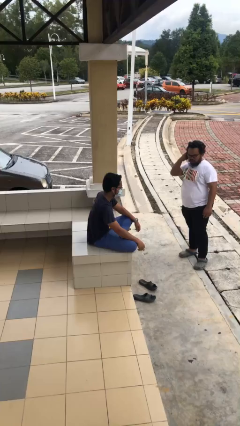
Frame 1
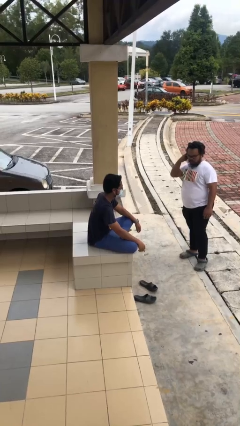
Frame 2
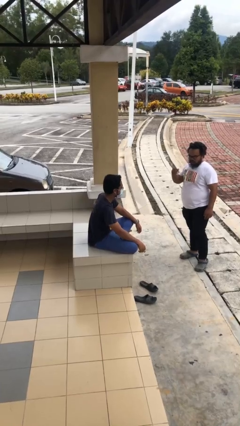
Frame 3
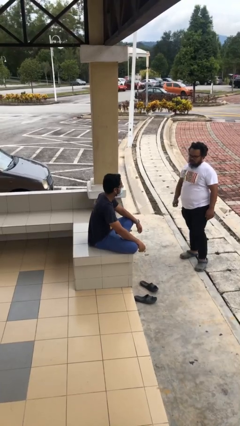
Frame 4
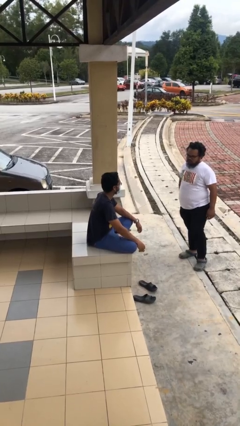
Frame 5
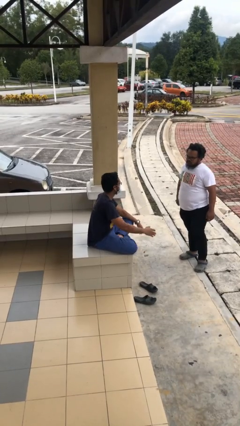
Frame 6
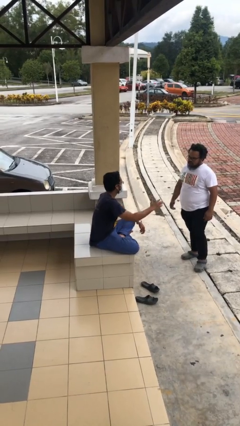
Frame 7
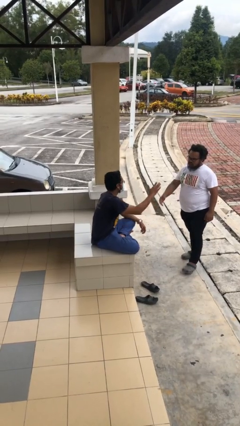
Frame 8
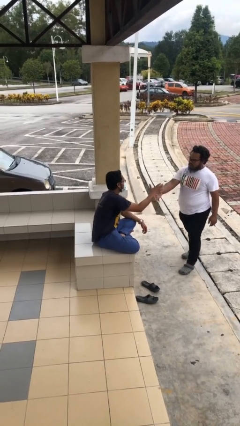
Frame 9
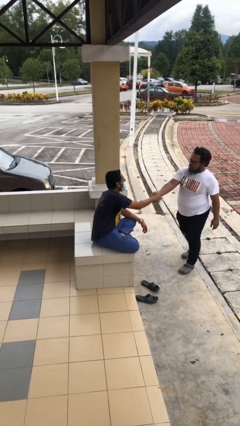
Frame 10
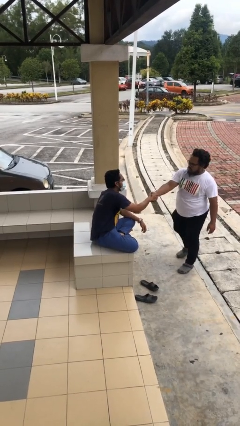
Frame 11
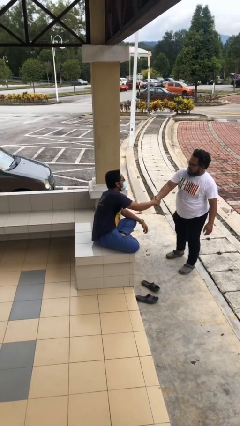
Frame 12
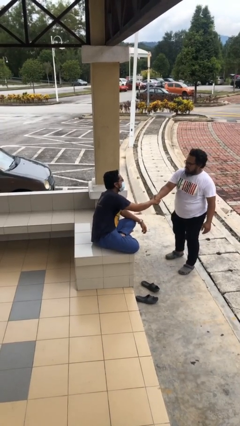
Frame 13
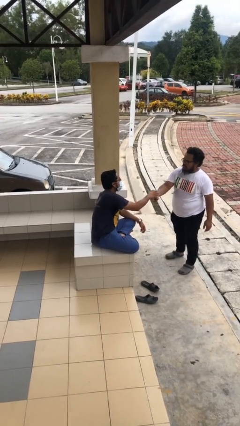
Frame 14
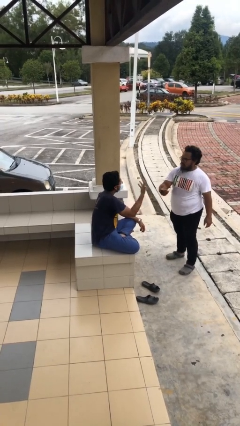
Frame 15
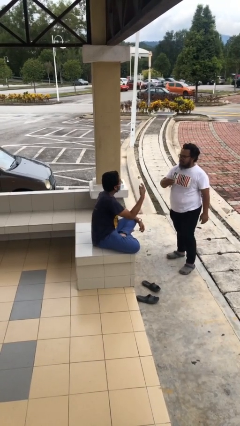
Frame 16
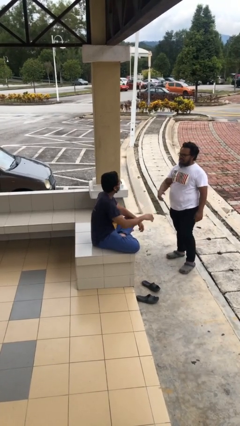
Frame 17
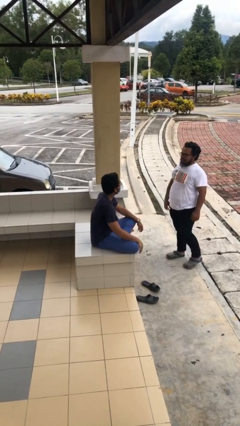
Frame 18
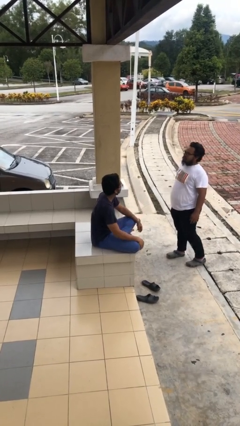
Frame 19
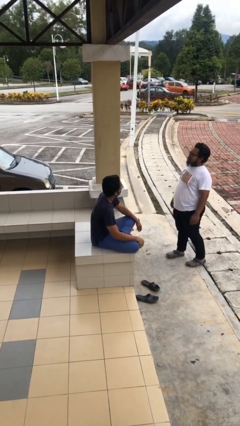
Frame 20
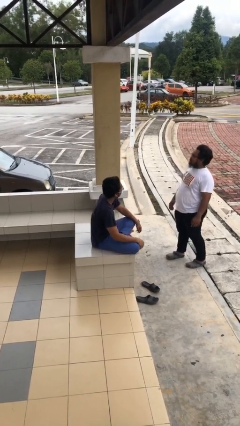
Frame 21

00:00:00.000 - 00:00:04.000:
person shakes hand

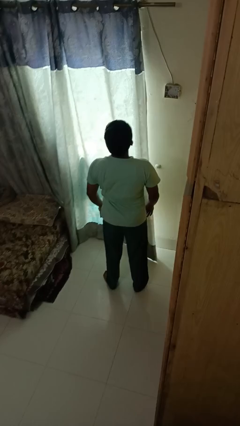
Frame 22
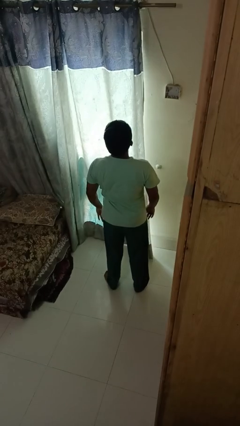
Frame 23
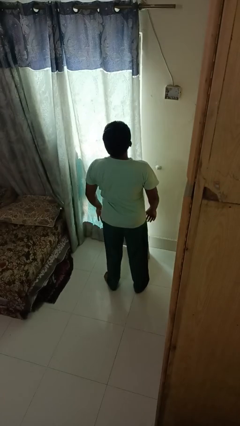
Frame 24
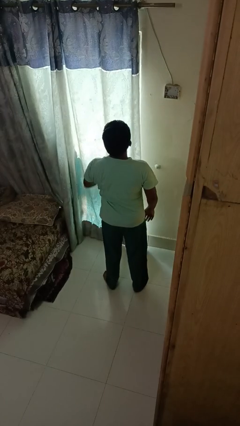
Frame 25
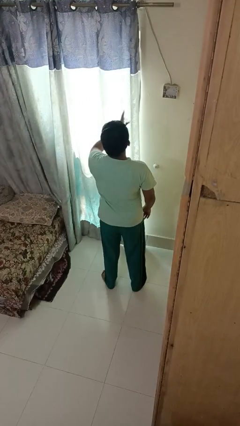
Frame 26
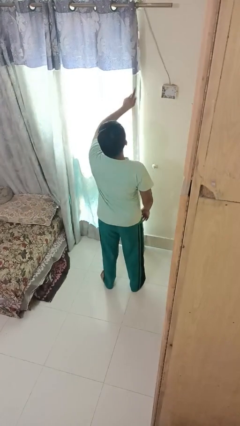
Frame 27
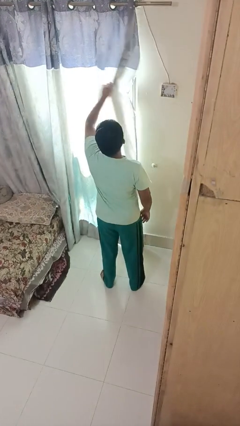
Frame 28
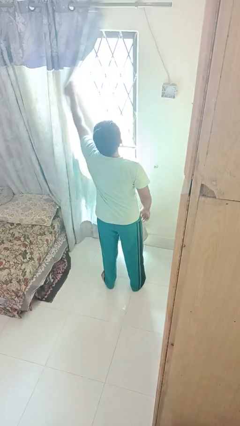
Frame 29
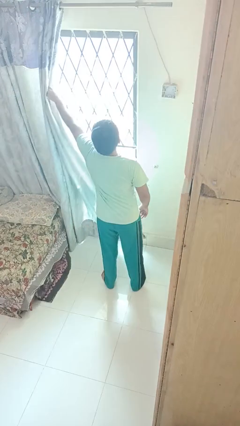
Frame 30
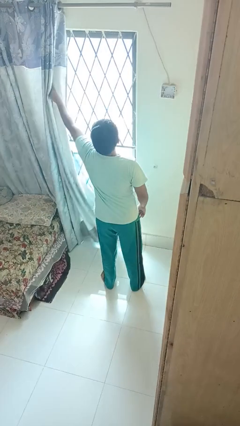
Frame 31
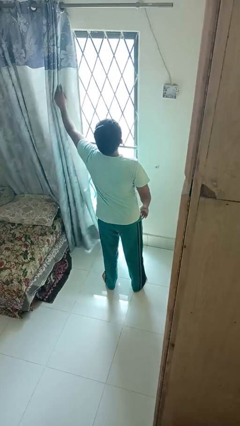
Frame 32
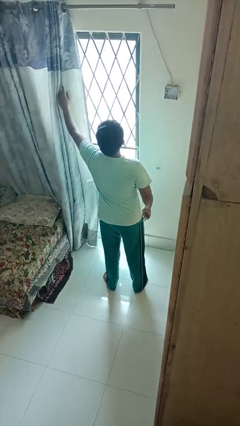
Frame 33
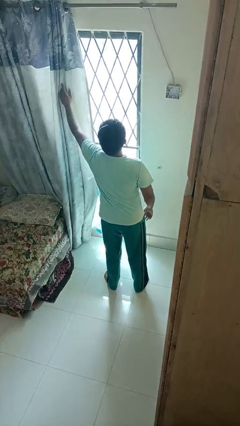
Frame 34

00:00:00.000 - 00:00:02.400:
person opens curtains

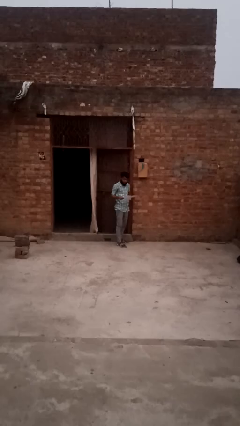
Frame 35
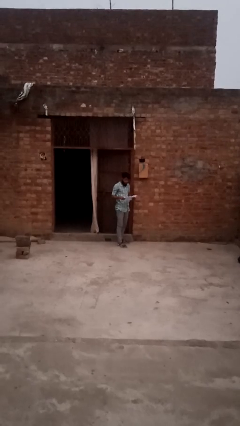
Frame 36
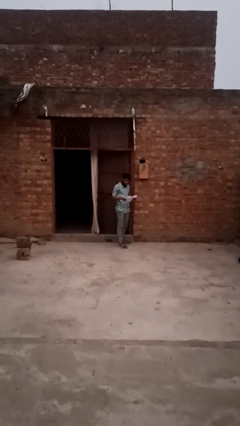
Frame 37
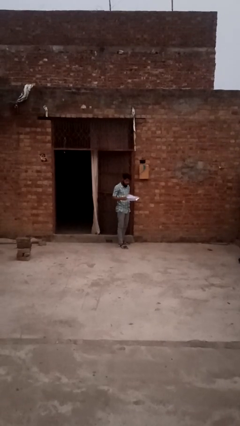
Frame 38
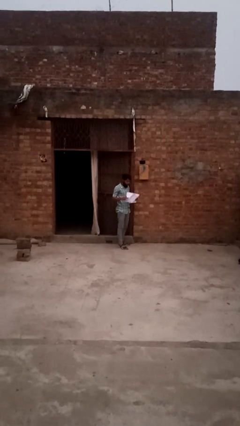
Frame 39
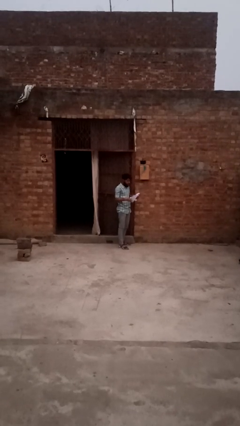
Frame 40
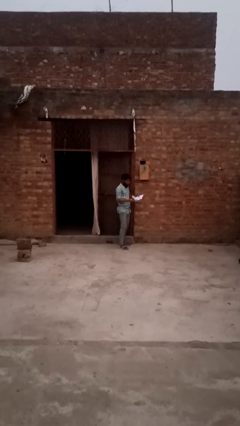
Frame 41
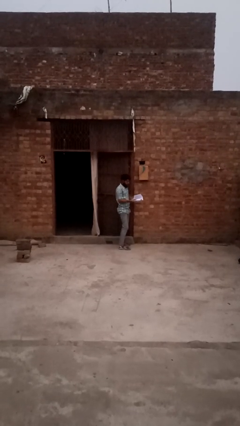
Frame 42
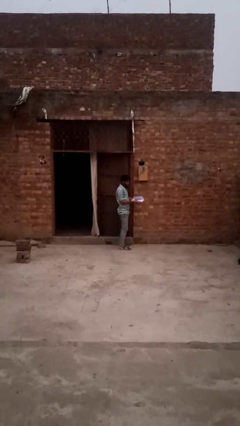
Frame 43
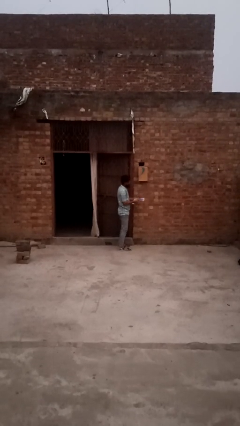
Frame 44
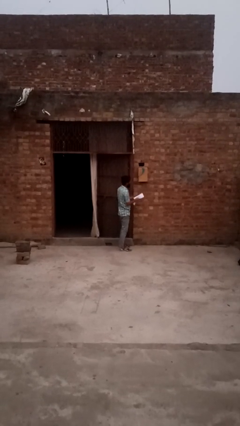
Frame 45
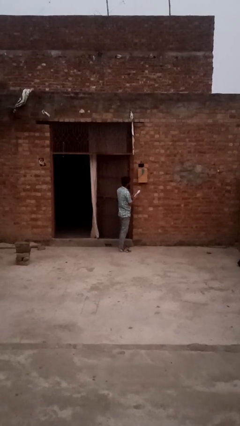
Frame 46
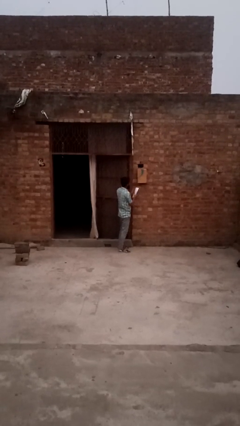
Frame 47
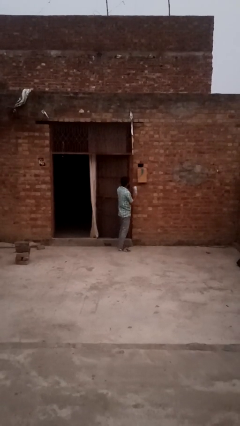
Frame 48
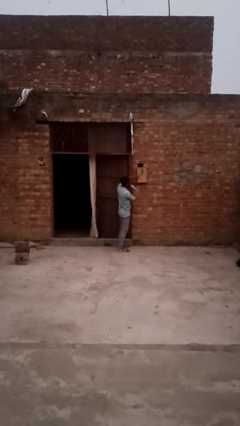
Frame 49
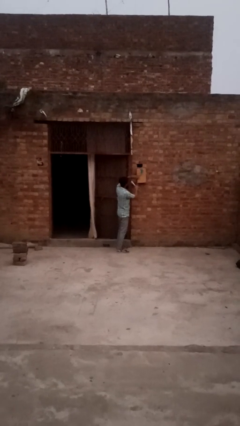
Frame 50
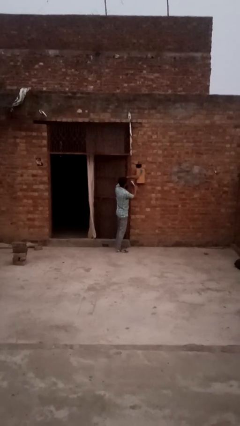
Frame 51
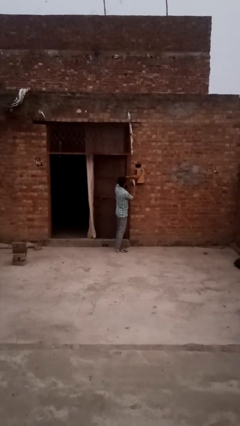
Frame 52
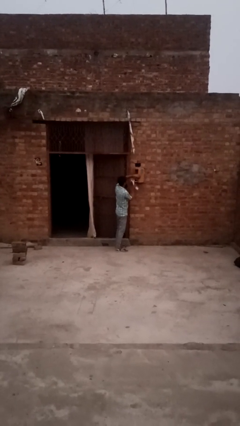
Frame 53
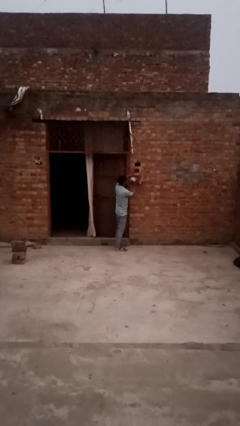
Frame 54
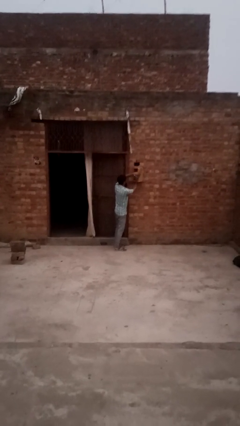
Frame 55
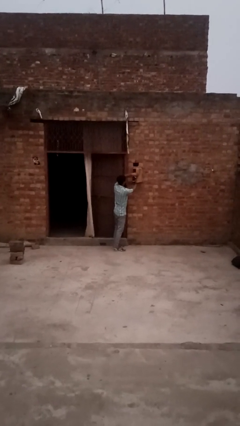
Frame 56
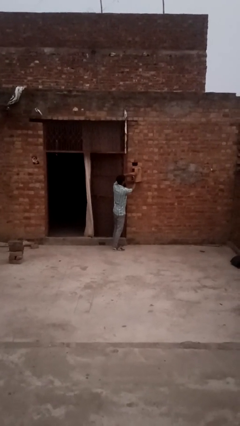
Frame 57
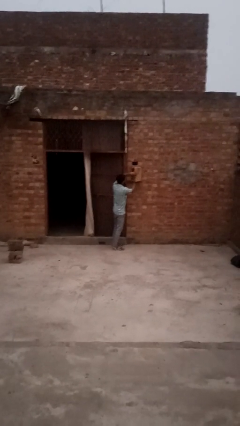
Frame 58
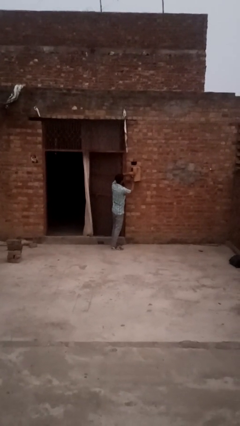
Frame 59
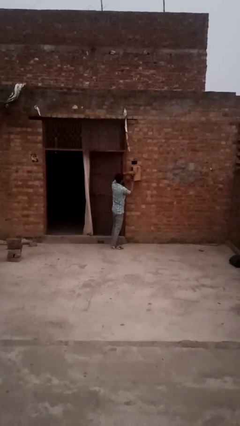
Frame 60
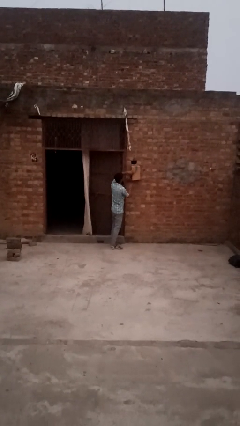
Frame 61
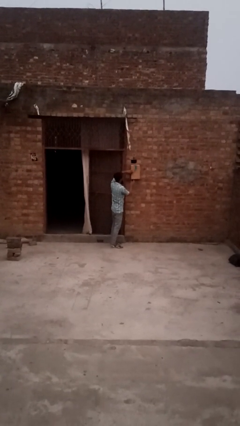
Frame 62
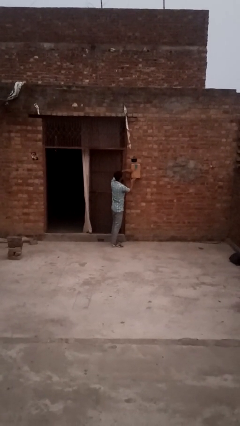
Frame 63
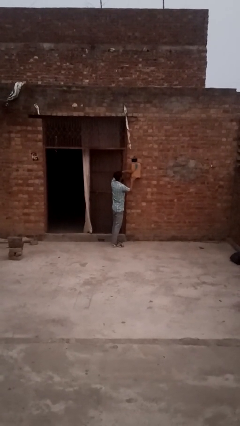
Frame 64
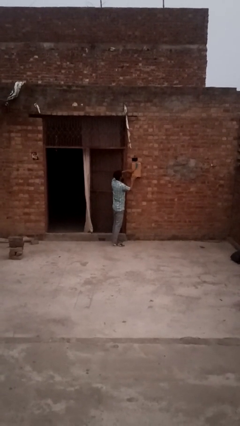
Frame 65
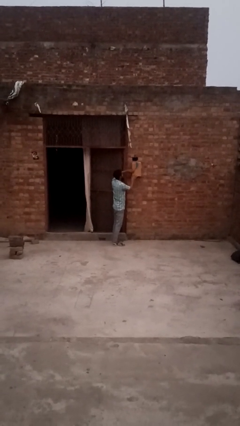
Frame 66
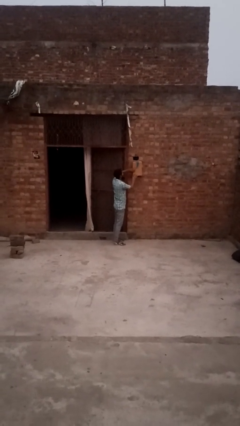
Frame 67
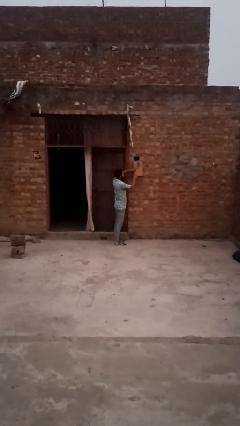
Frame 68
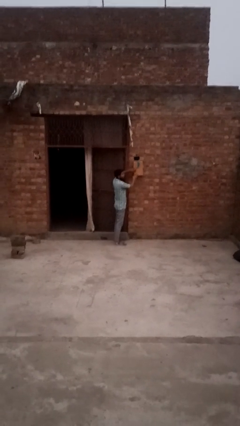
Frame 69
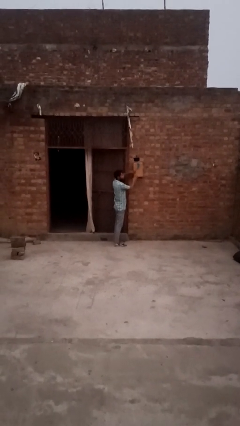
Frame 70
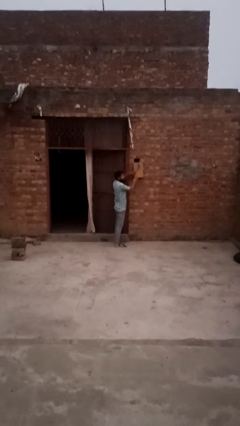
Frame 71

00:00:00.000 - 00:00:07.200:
person takes letters from mailbox

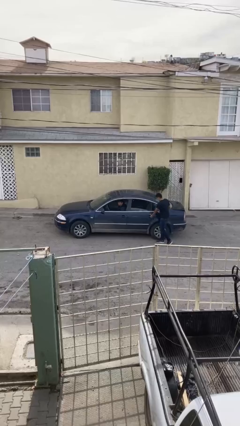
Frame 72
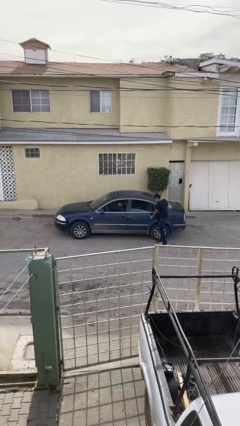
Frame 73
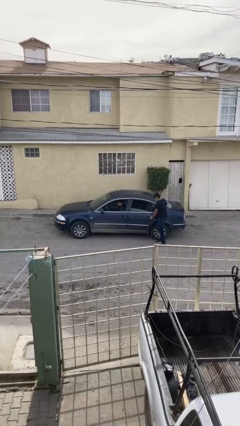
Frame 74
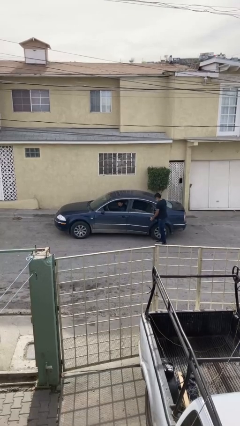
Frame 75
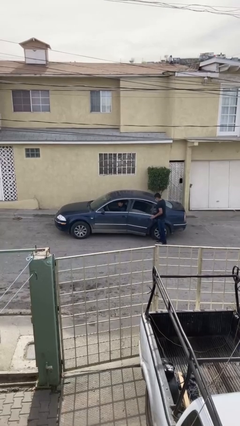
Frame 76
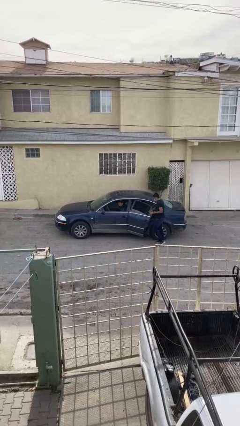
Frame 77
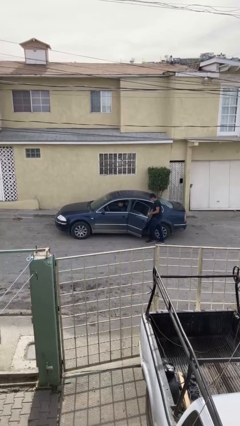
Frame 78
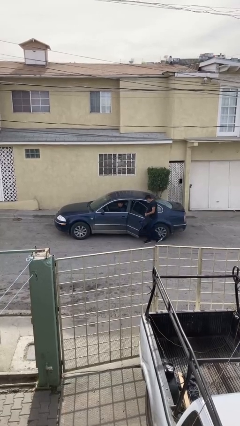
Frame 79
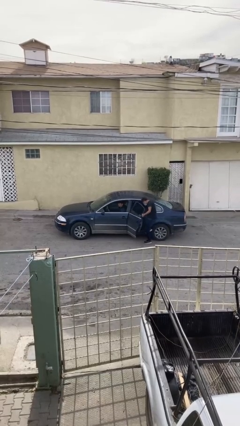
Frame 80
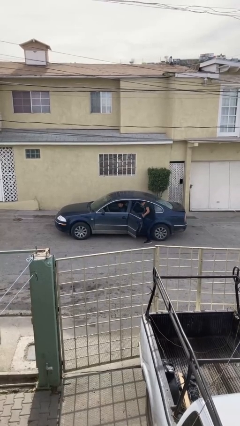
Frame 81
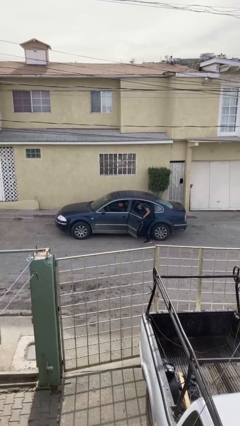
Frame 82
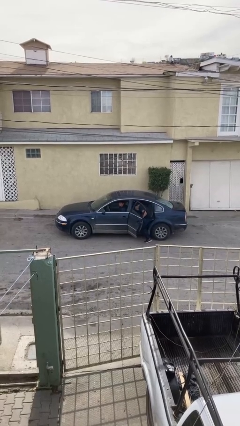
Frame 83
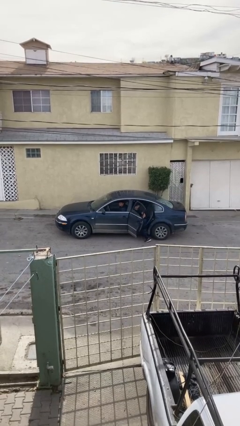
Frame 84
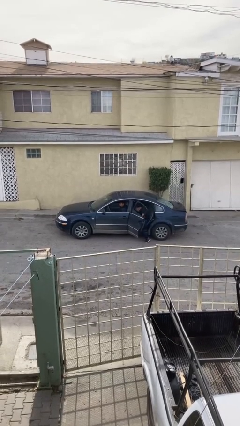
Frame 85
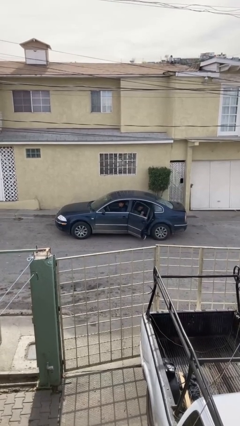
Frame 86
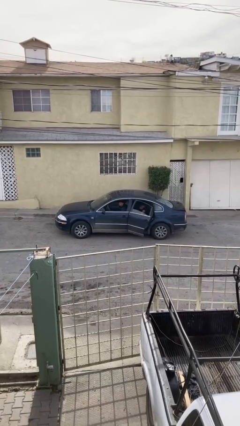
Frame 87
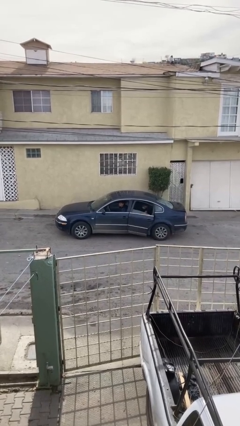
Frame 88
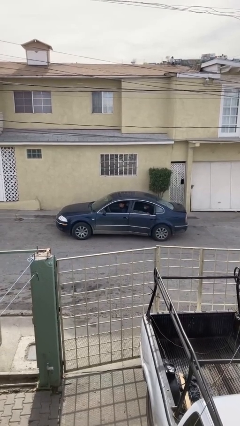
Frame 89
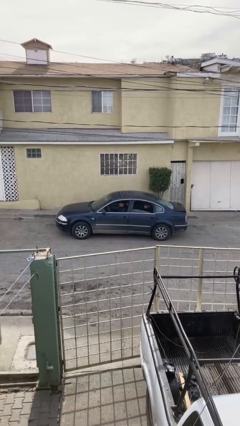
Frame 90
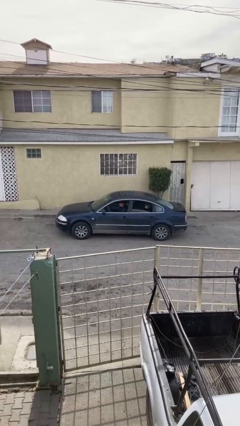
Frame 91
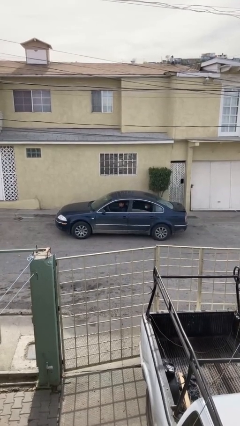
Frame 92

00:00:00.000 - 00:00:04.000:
car picks up person
